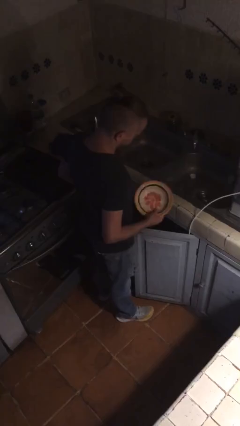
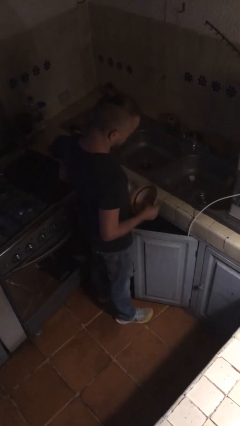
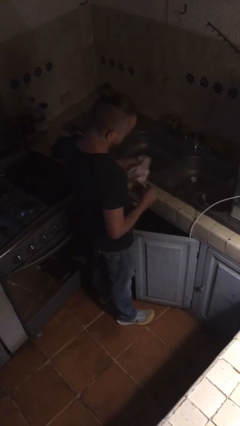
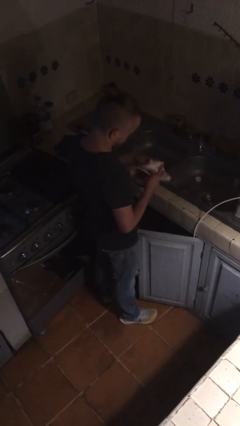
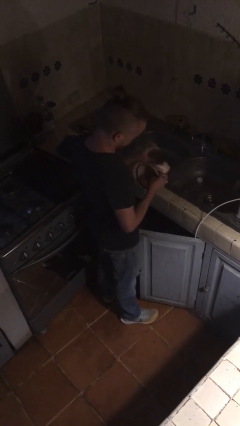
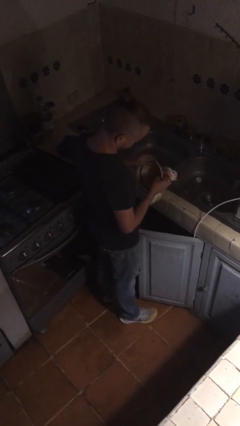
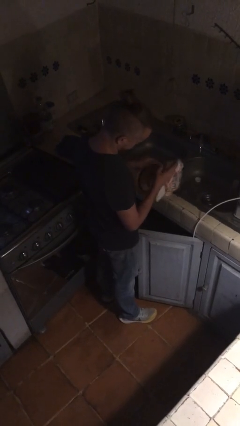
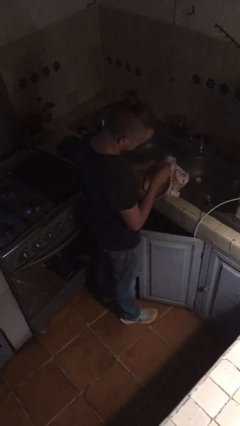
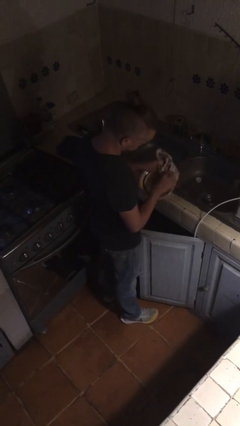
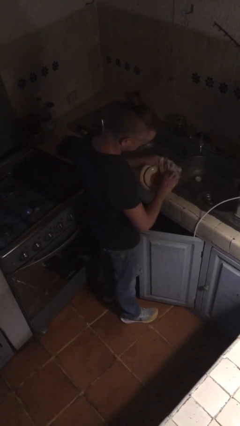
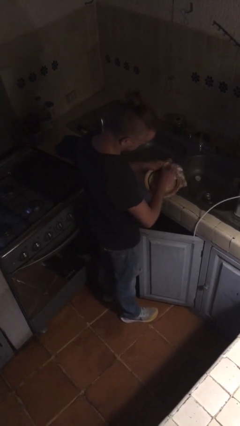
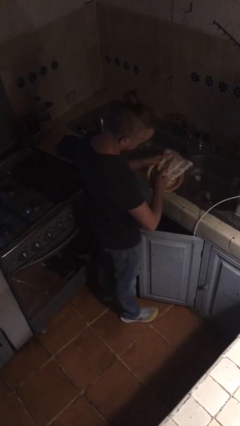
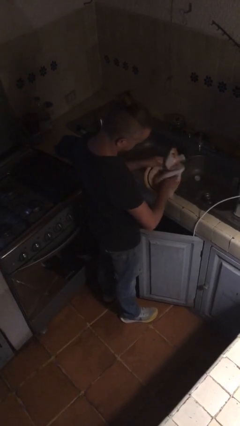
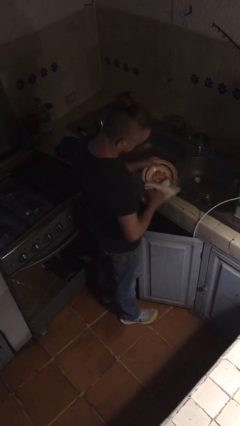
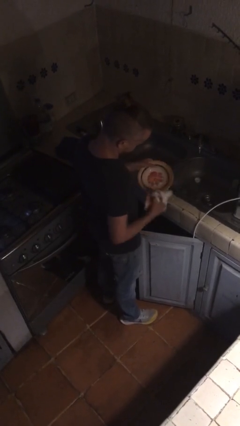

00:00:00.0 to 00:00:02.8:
person dries dish

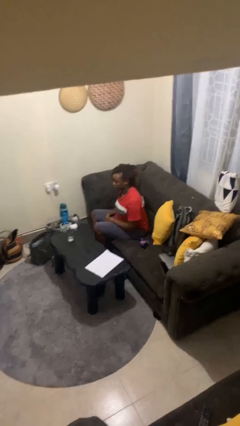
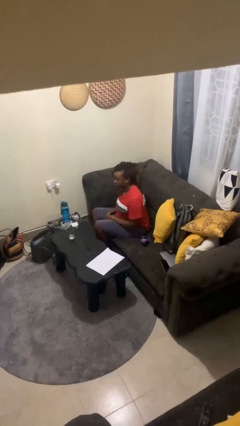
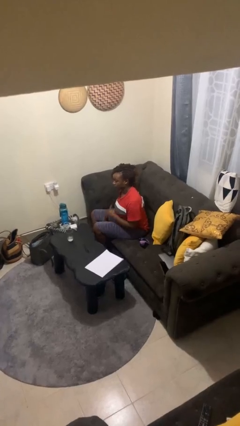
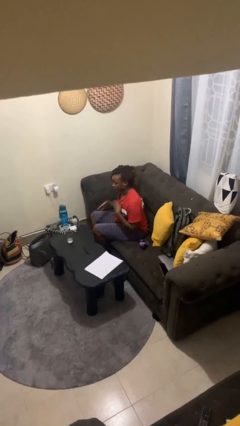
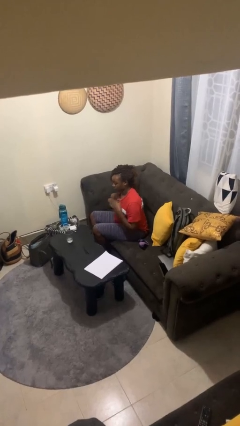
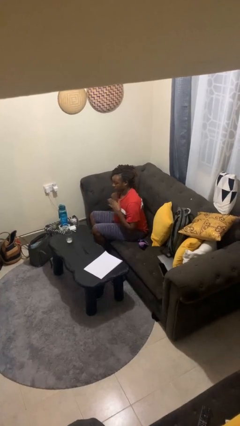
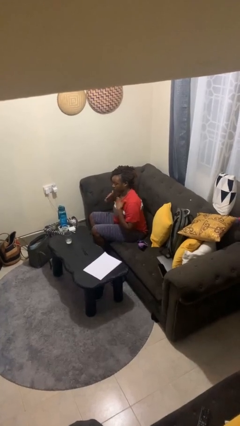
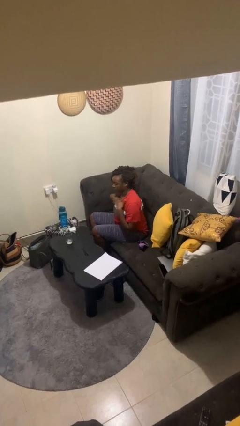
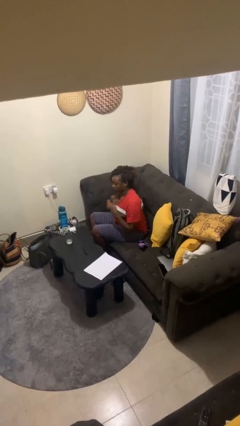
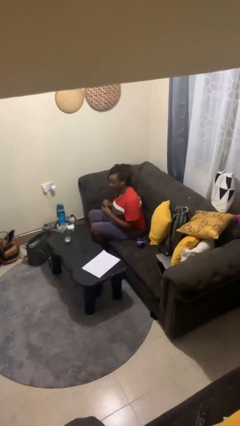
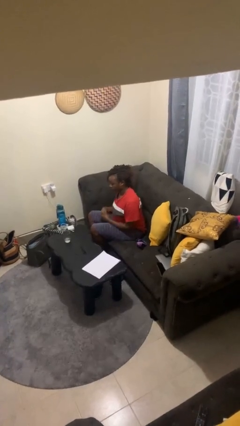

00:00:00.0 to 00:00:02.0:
person drums on chest

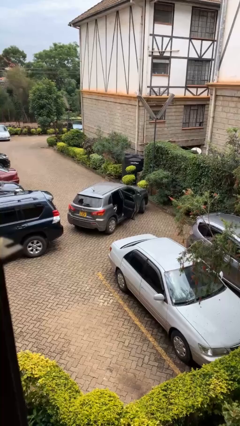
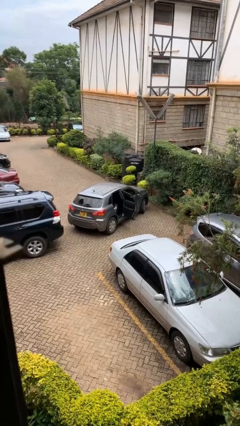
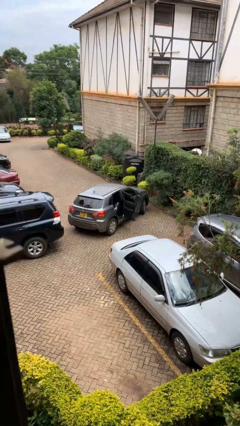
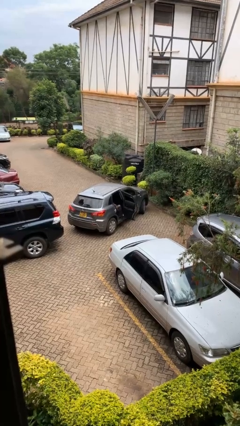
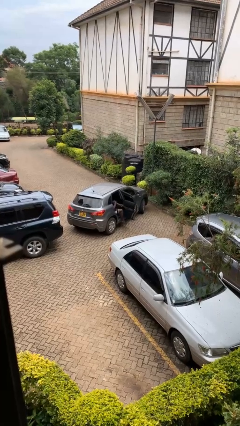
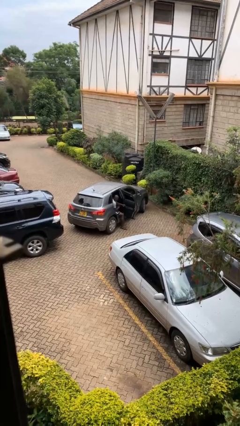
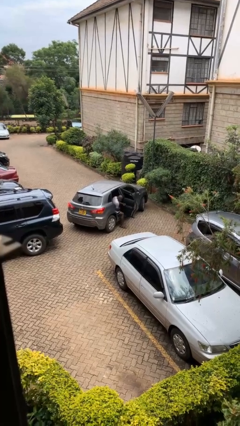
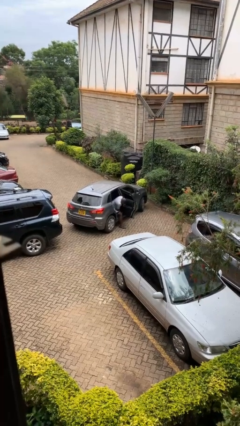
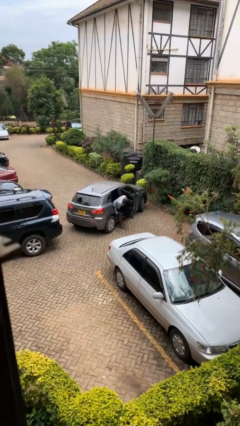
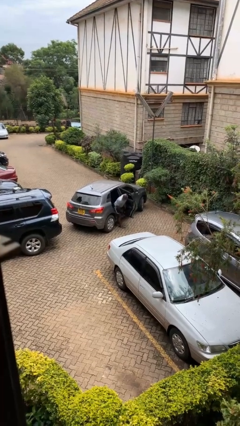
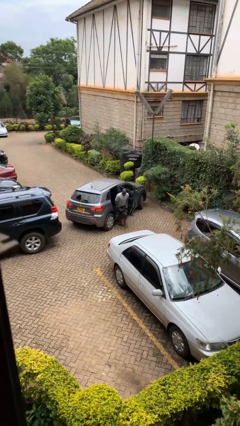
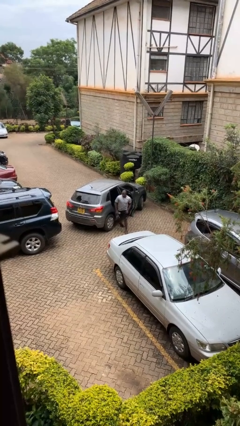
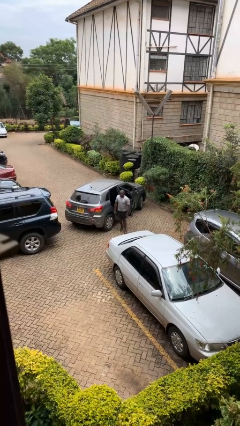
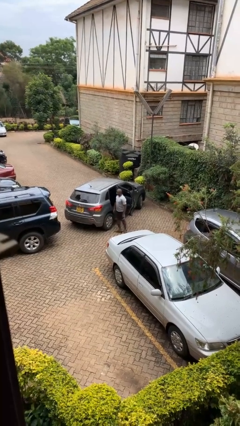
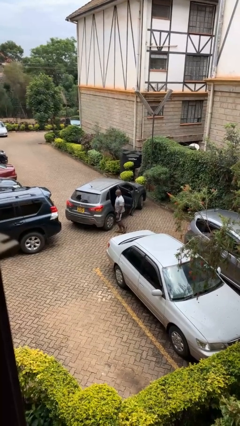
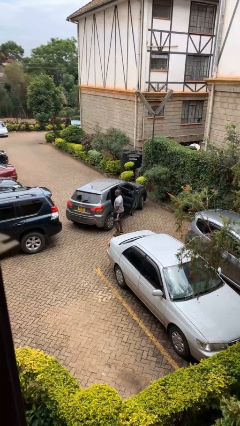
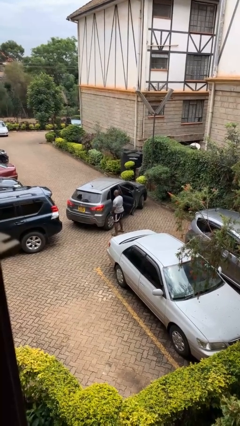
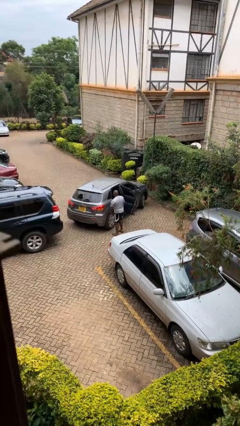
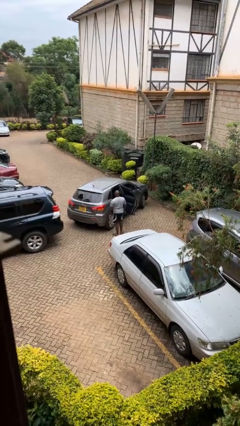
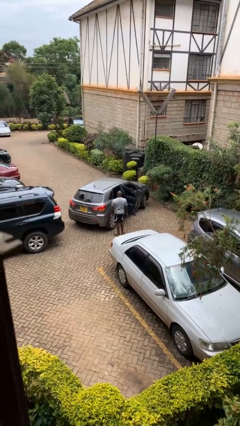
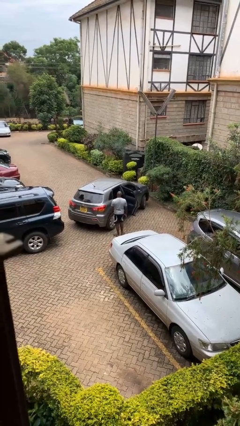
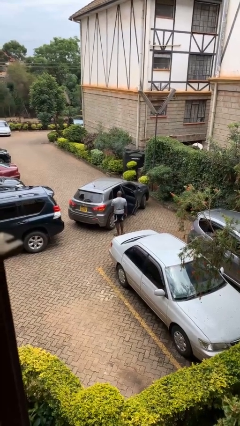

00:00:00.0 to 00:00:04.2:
person exits car

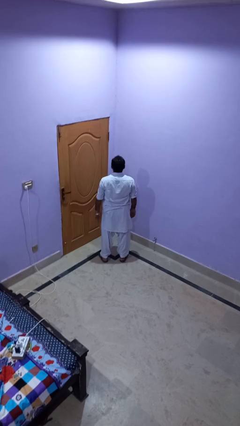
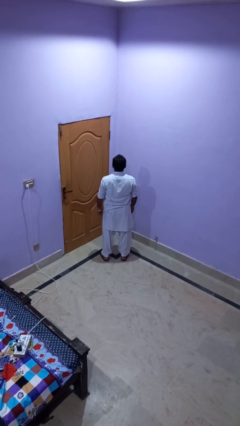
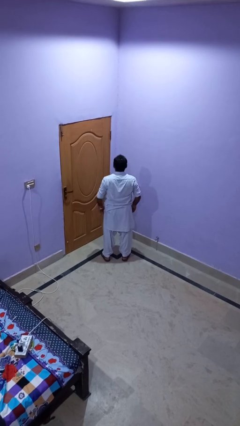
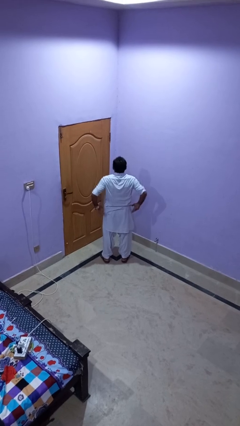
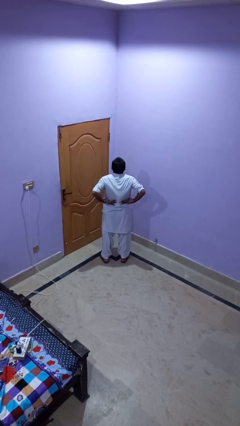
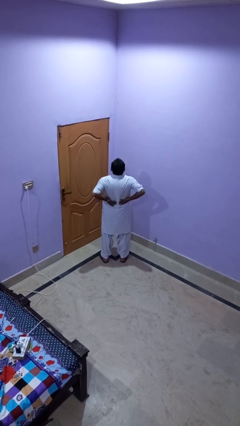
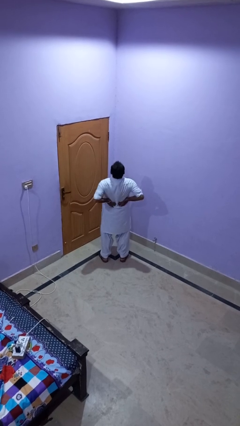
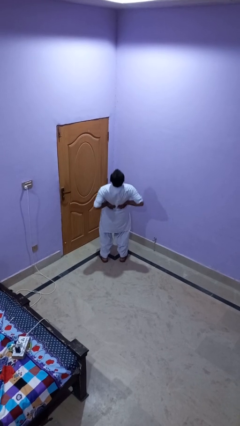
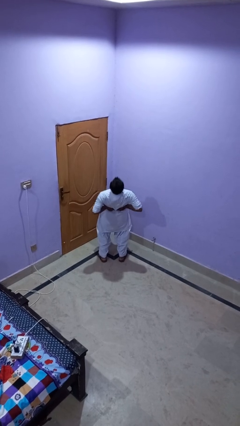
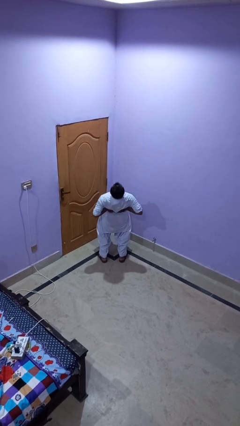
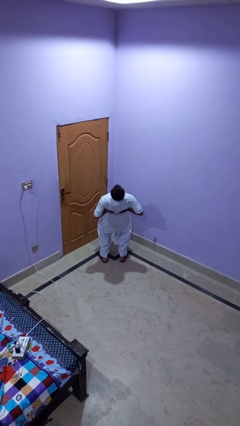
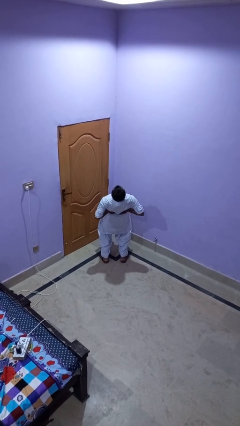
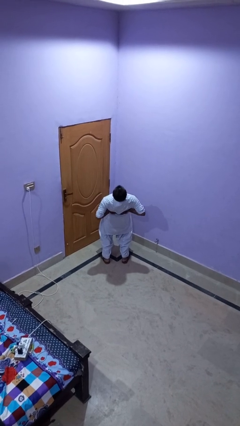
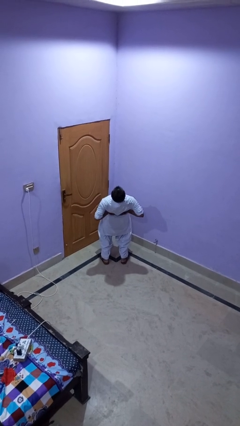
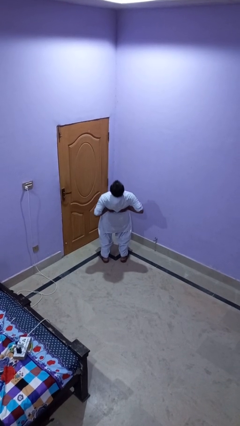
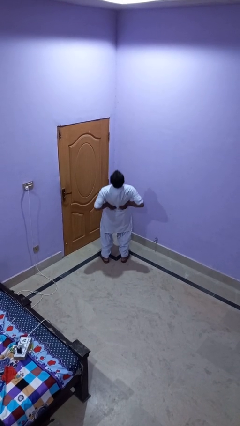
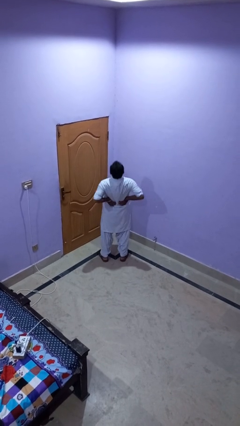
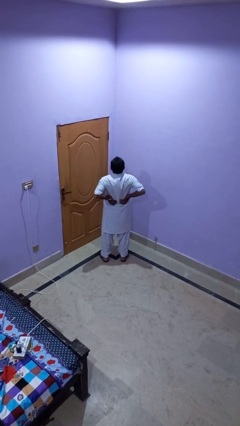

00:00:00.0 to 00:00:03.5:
person stretches back

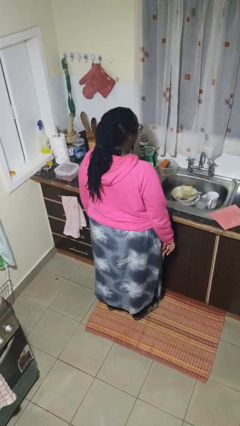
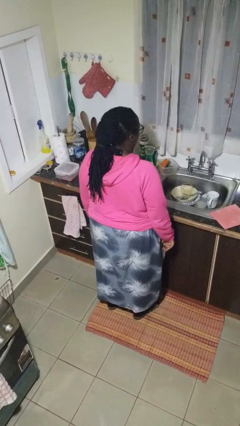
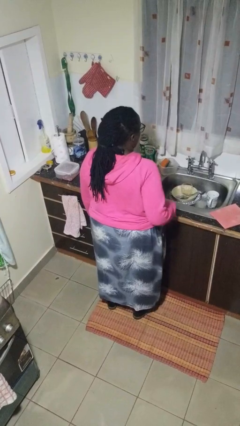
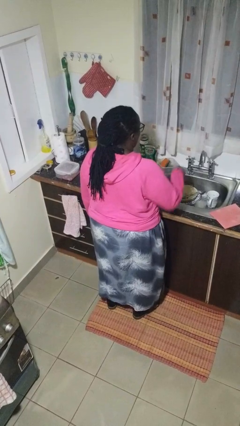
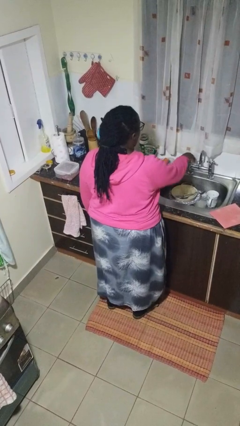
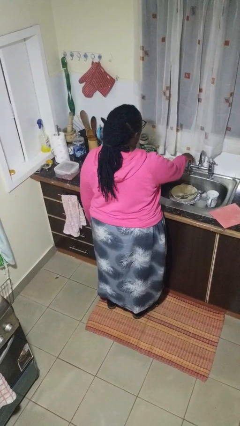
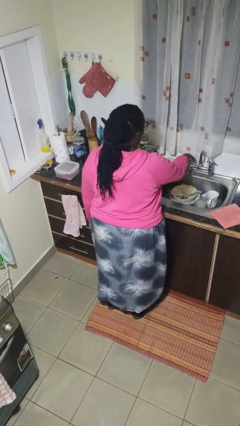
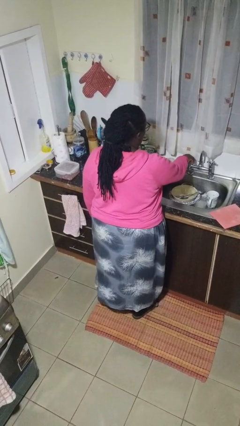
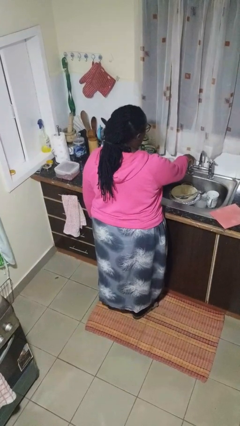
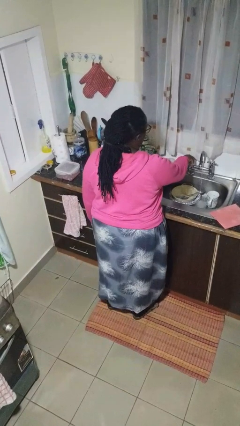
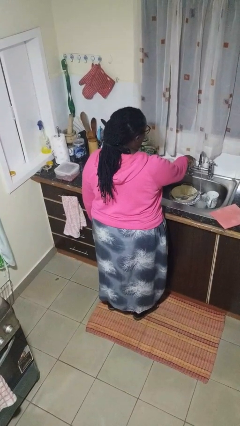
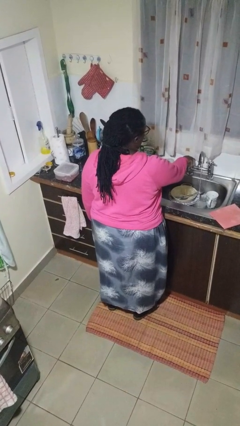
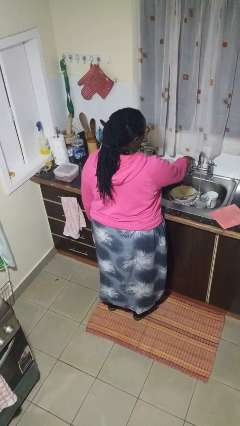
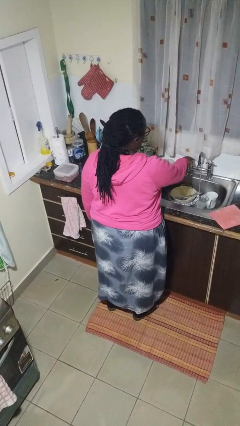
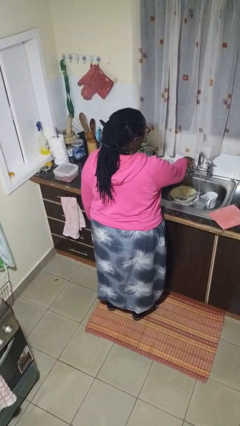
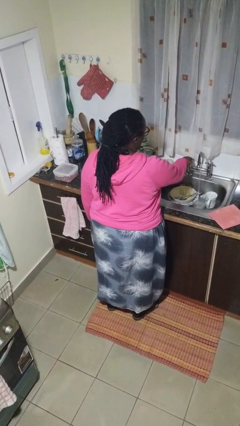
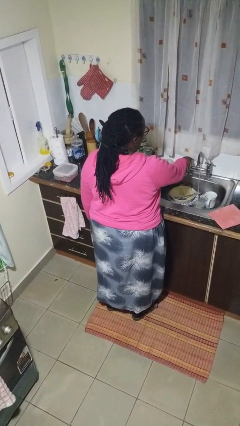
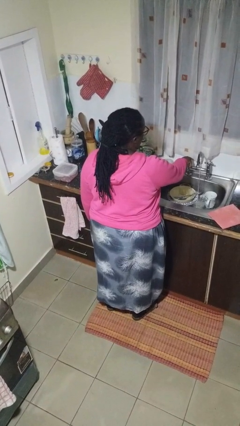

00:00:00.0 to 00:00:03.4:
person turns on faucet

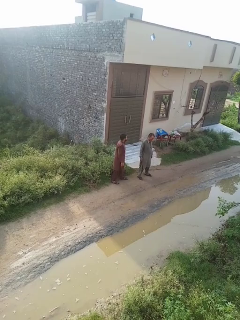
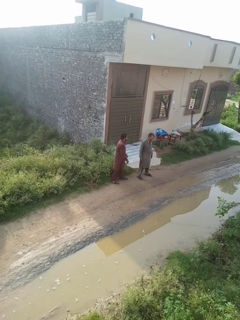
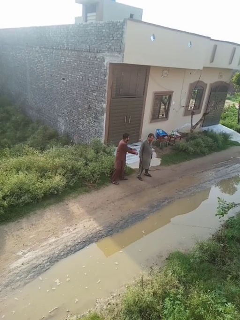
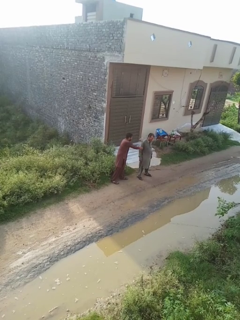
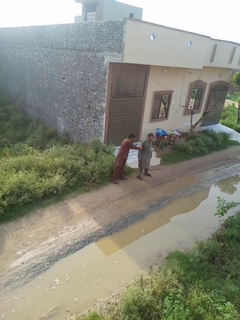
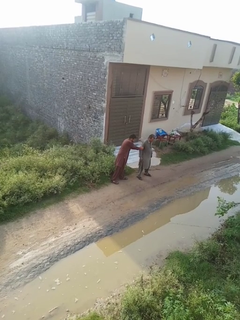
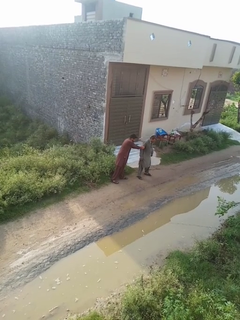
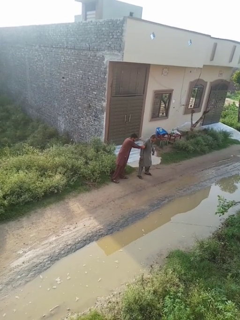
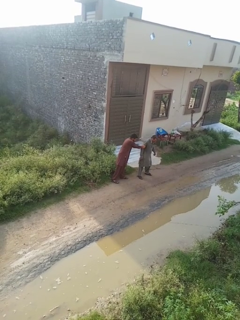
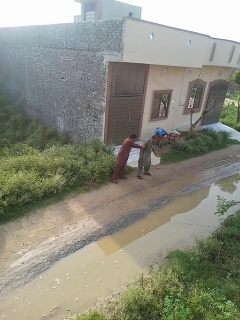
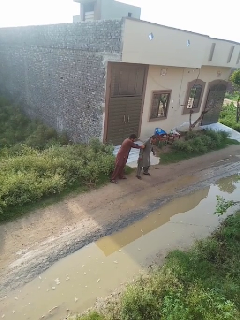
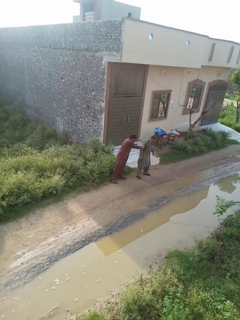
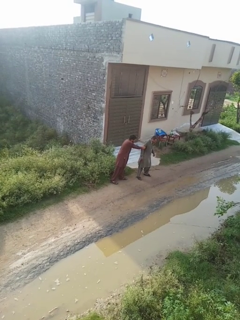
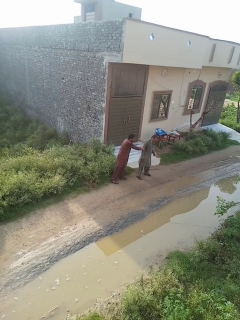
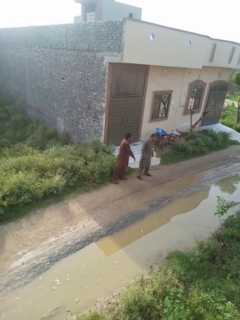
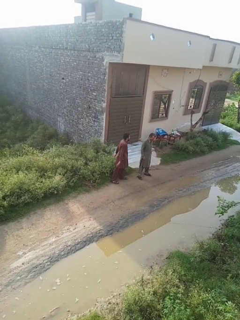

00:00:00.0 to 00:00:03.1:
person grabs person by bicep
